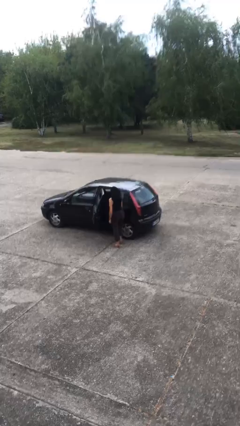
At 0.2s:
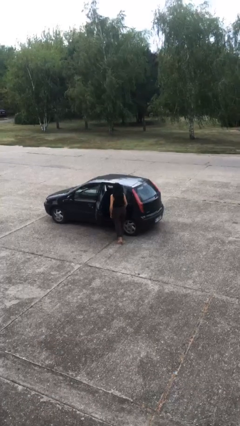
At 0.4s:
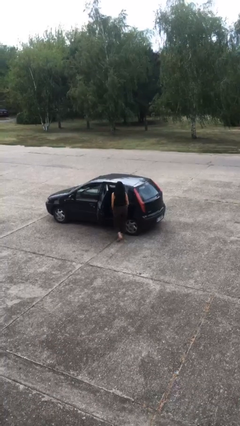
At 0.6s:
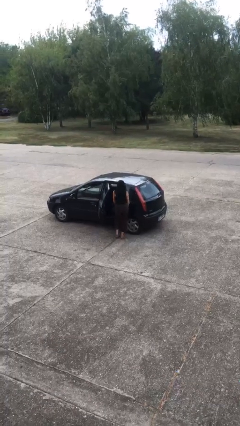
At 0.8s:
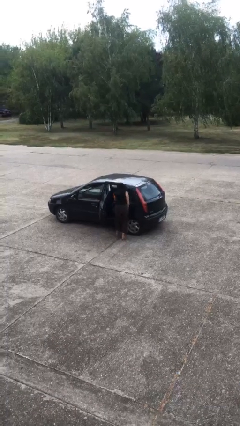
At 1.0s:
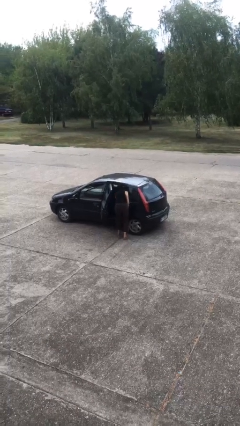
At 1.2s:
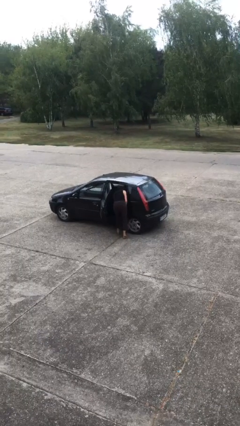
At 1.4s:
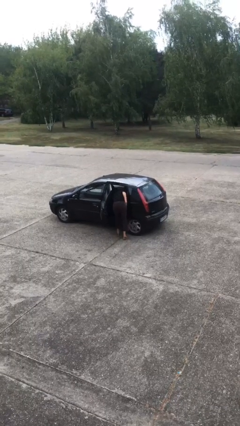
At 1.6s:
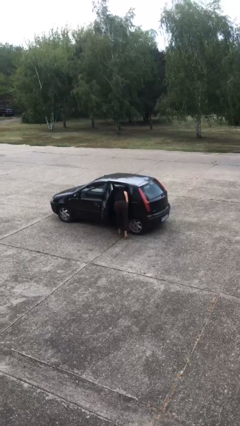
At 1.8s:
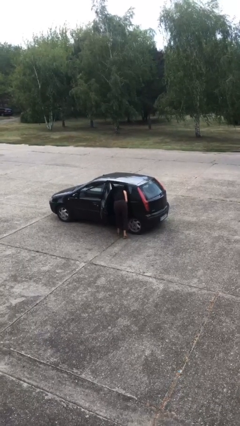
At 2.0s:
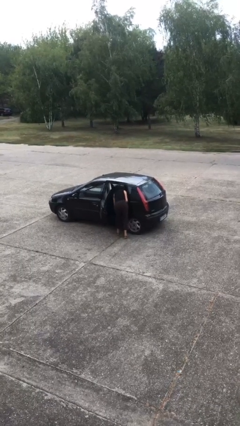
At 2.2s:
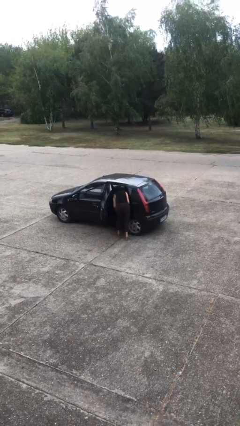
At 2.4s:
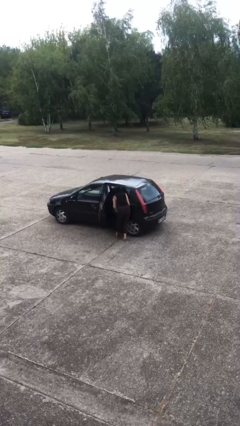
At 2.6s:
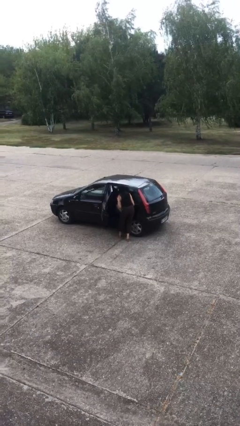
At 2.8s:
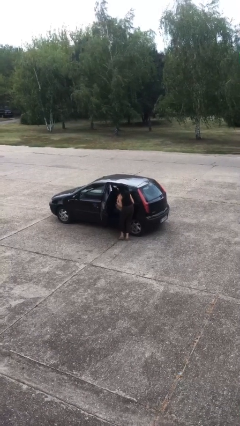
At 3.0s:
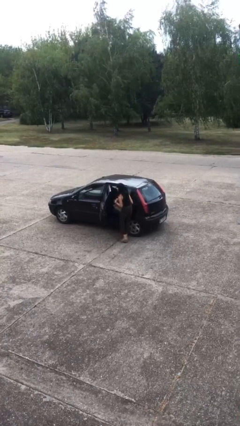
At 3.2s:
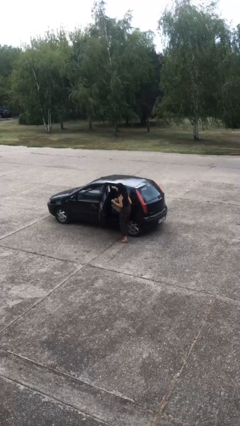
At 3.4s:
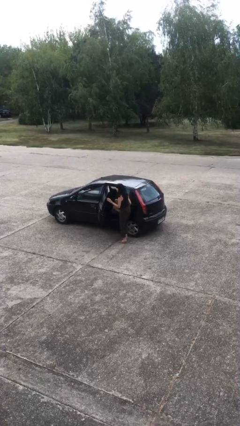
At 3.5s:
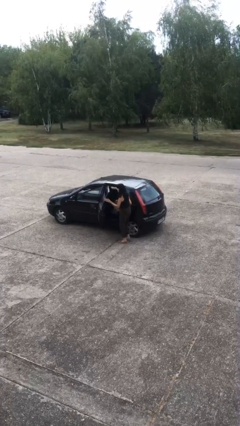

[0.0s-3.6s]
person unloads car

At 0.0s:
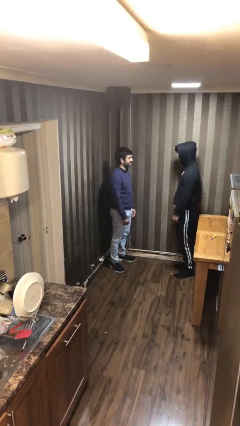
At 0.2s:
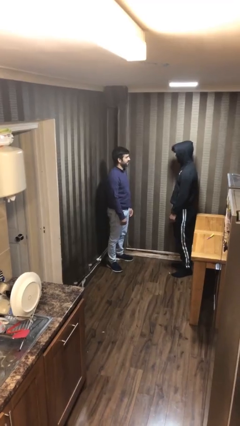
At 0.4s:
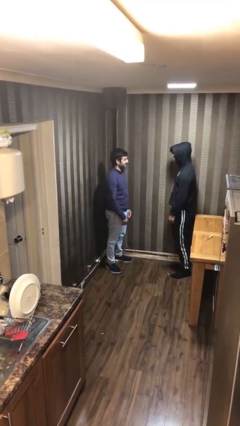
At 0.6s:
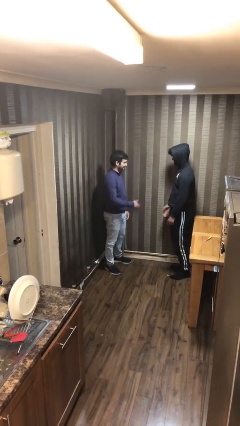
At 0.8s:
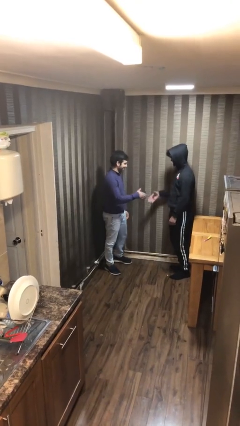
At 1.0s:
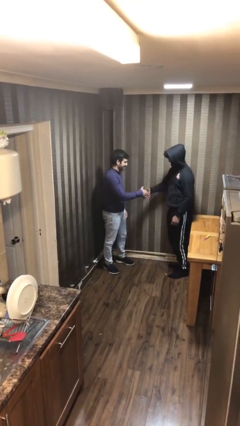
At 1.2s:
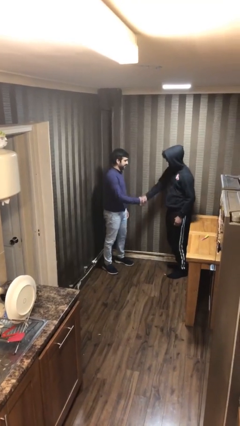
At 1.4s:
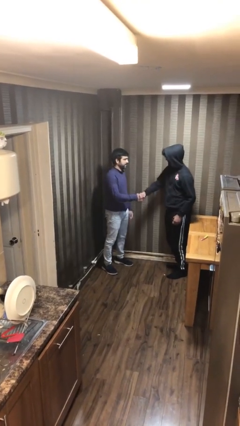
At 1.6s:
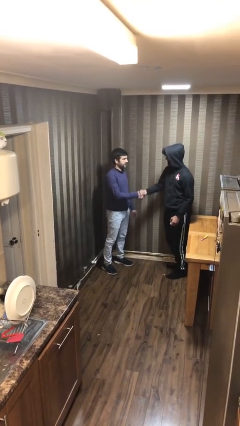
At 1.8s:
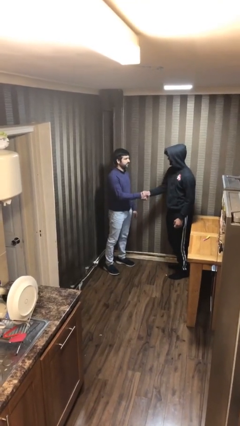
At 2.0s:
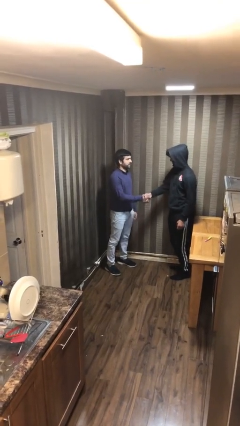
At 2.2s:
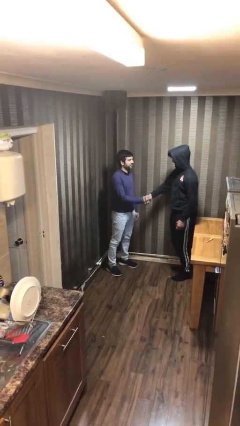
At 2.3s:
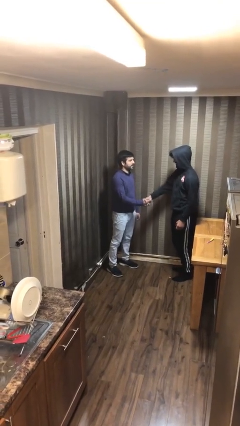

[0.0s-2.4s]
person shakes hand

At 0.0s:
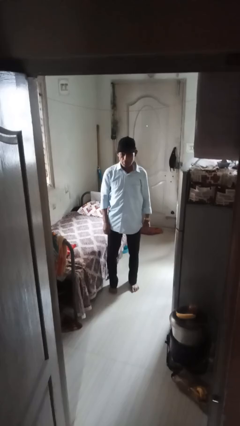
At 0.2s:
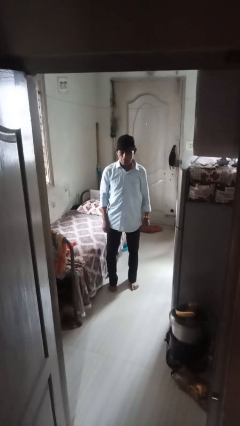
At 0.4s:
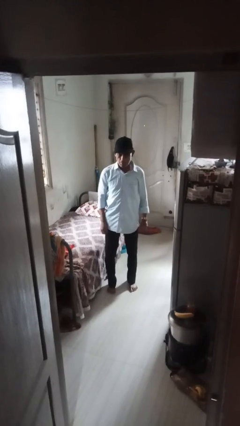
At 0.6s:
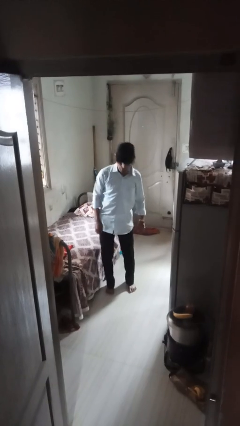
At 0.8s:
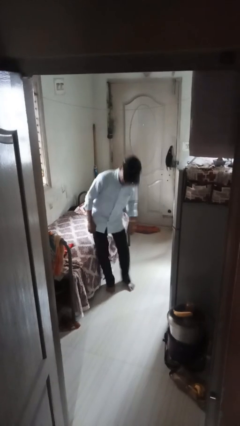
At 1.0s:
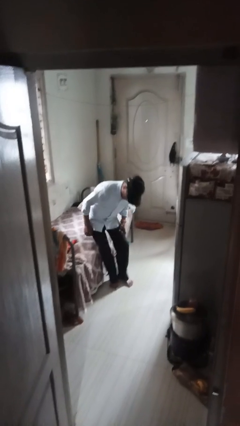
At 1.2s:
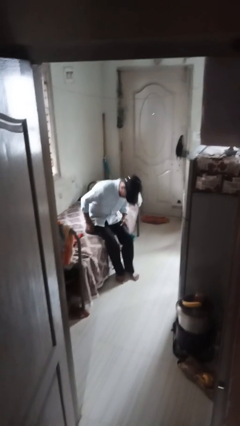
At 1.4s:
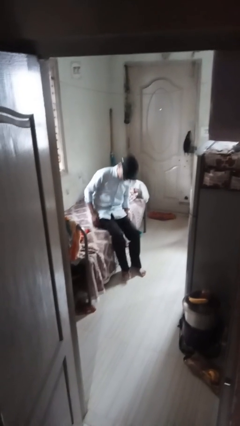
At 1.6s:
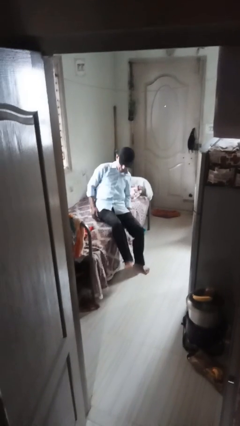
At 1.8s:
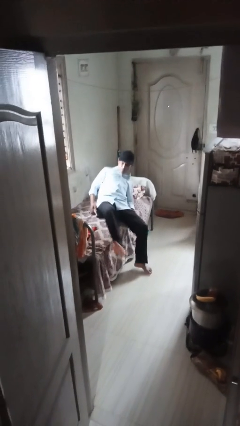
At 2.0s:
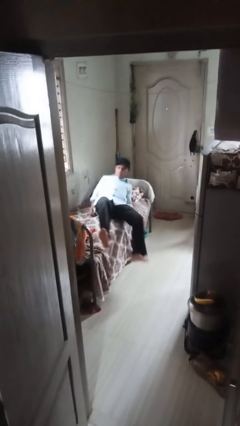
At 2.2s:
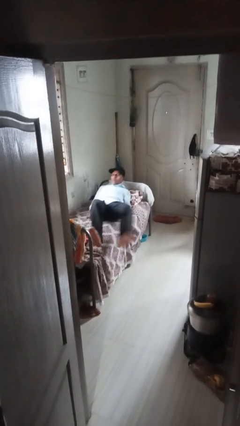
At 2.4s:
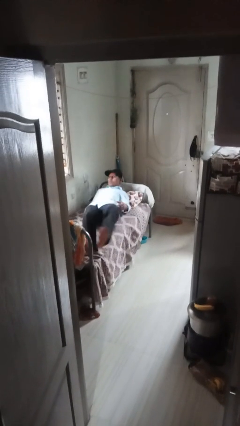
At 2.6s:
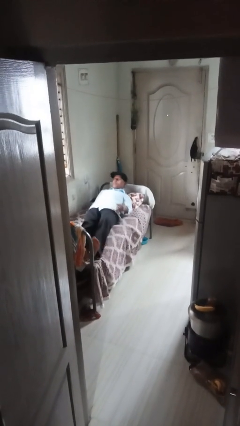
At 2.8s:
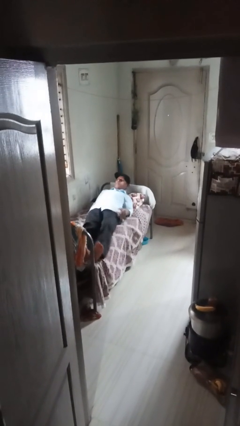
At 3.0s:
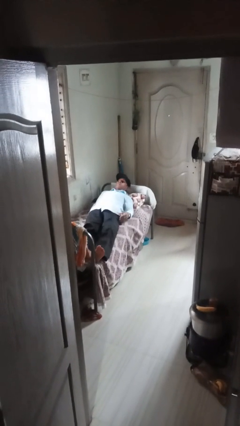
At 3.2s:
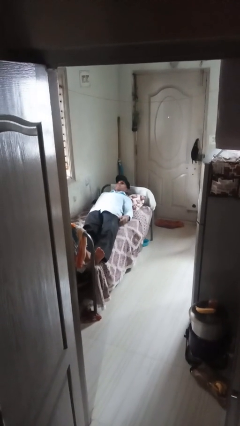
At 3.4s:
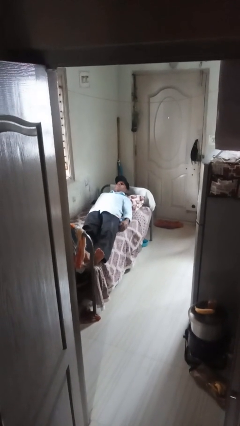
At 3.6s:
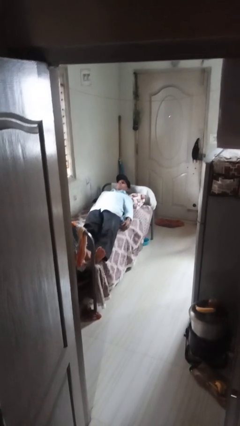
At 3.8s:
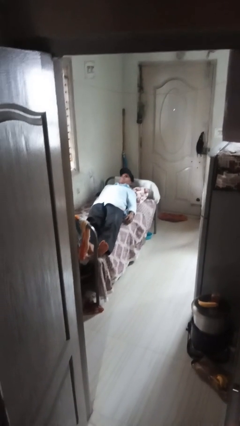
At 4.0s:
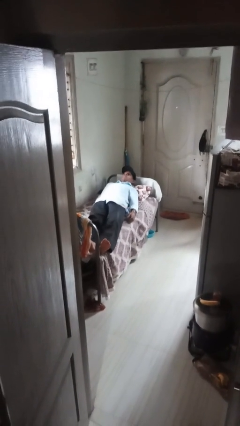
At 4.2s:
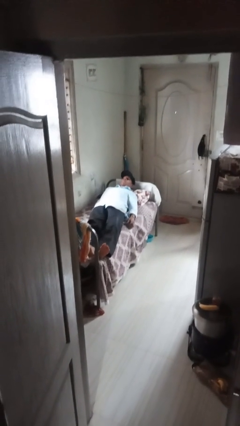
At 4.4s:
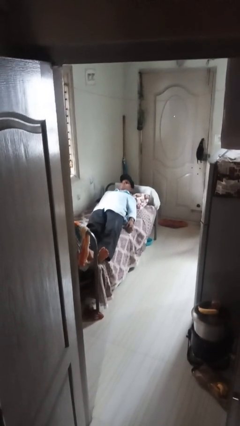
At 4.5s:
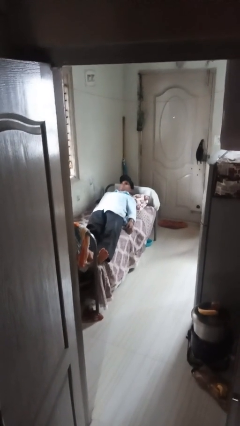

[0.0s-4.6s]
person lies down on bed

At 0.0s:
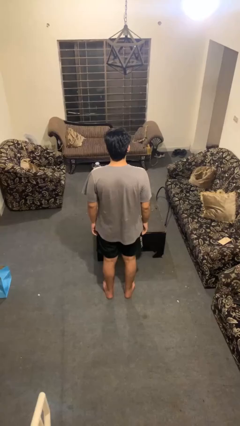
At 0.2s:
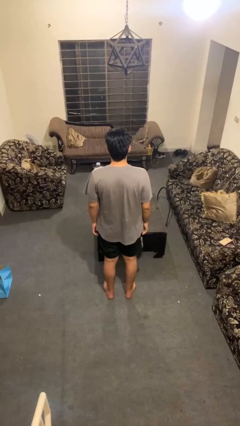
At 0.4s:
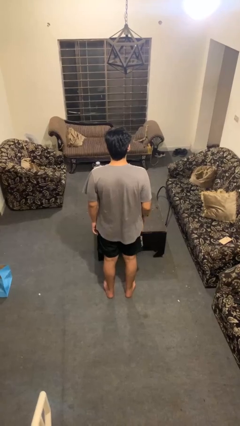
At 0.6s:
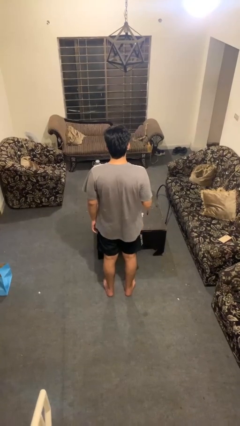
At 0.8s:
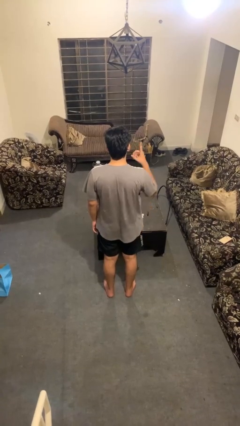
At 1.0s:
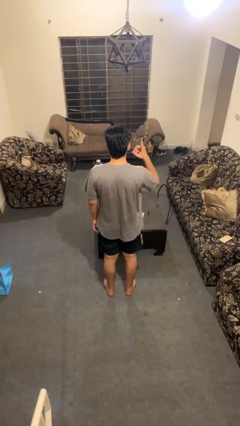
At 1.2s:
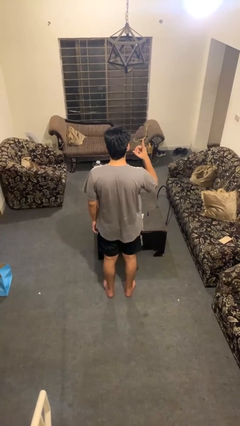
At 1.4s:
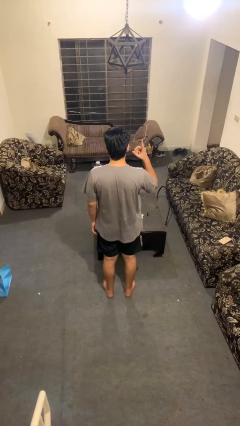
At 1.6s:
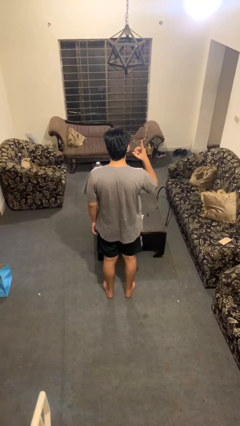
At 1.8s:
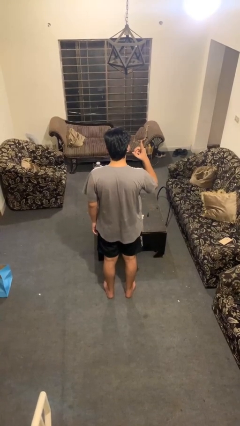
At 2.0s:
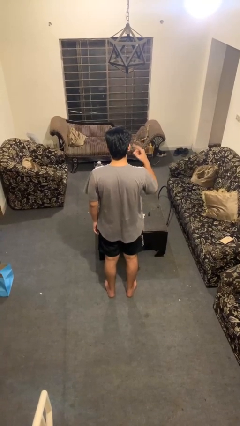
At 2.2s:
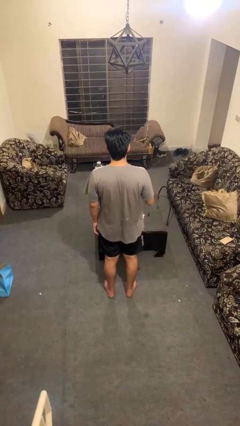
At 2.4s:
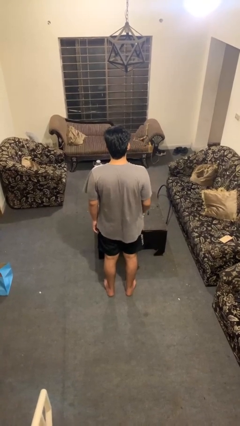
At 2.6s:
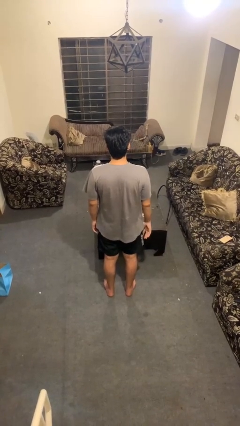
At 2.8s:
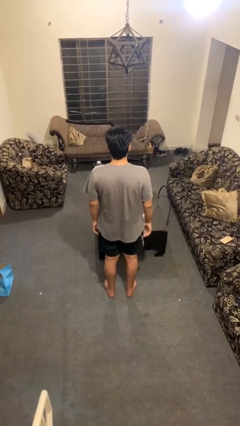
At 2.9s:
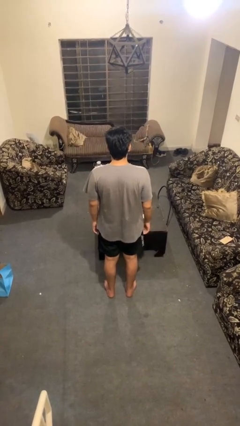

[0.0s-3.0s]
person gestures number one

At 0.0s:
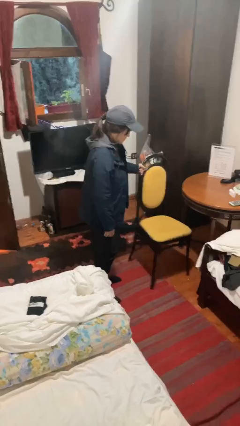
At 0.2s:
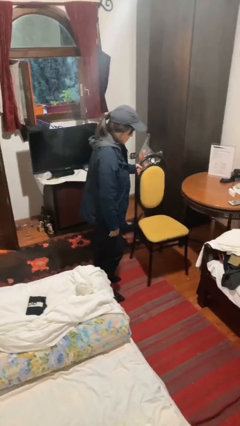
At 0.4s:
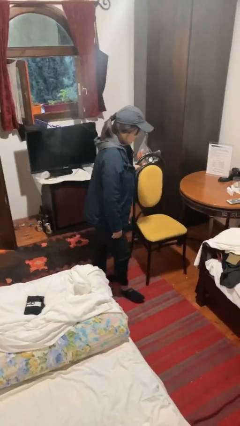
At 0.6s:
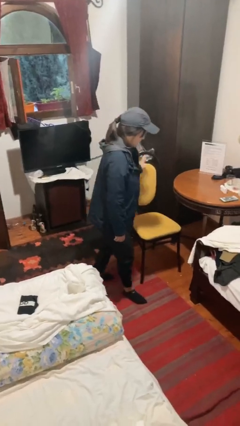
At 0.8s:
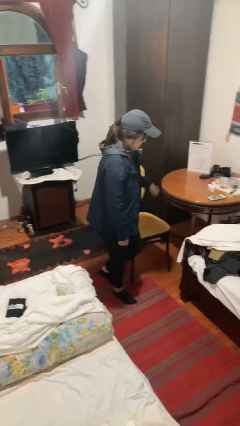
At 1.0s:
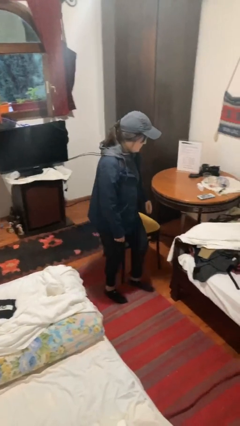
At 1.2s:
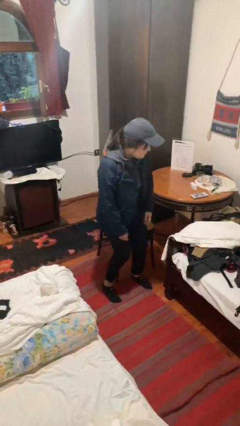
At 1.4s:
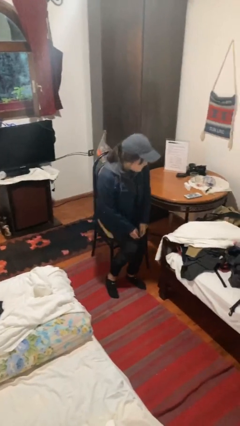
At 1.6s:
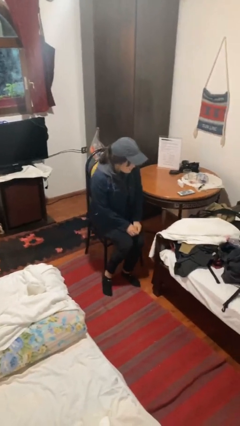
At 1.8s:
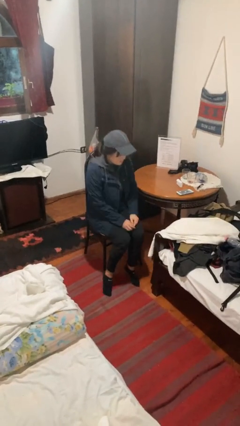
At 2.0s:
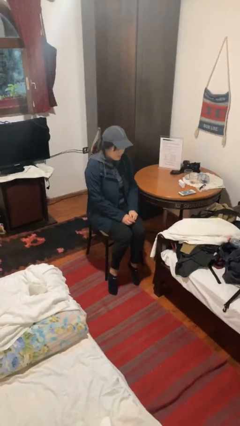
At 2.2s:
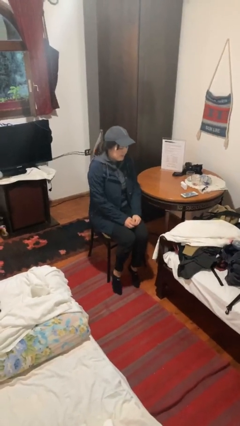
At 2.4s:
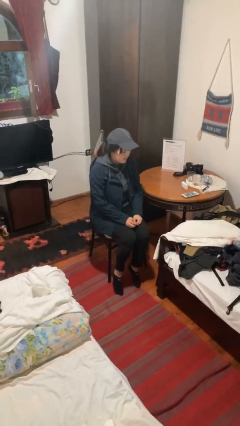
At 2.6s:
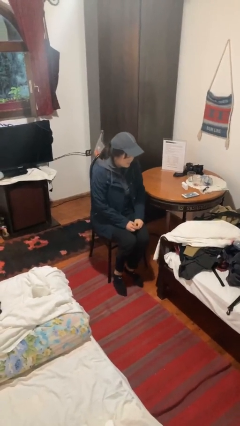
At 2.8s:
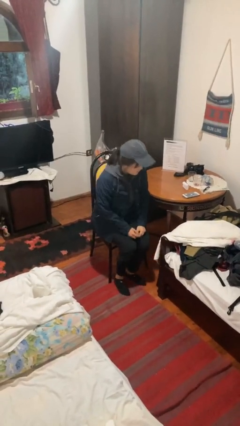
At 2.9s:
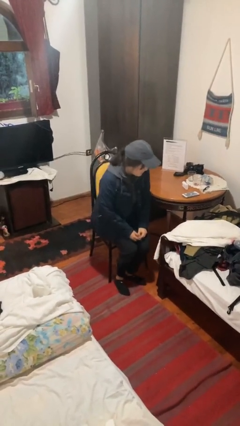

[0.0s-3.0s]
person sits down

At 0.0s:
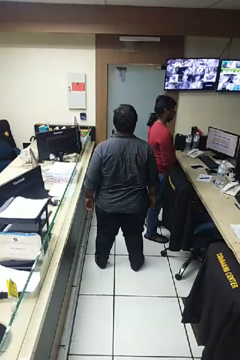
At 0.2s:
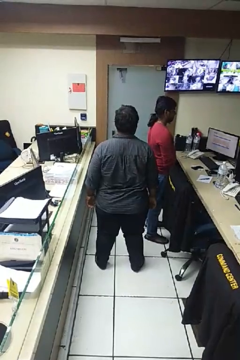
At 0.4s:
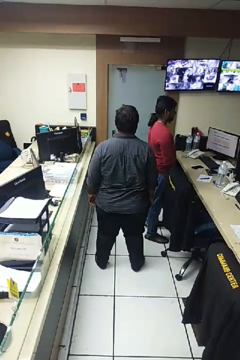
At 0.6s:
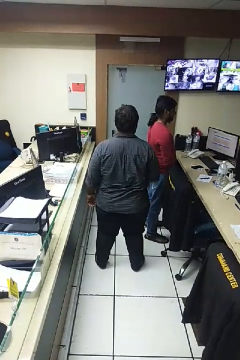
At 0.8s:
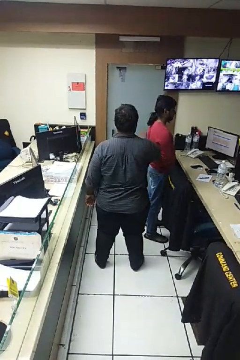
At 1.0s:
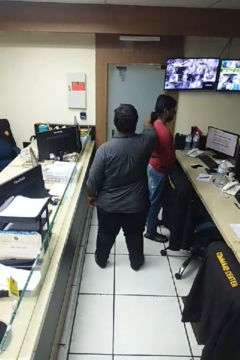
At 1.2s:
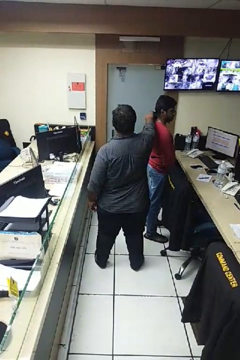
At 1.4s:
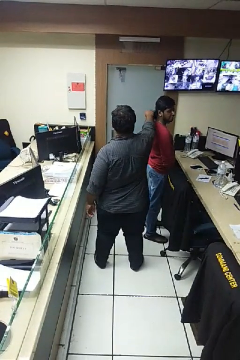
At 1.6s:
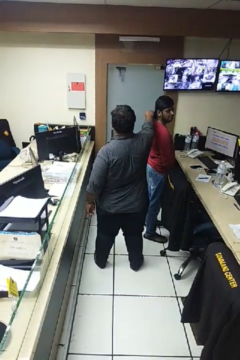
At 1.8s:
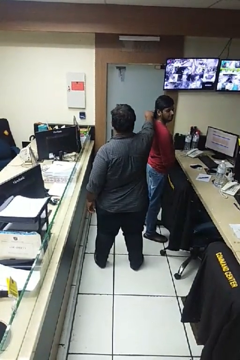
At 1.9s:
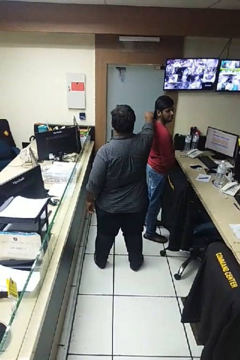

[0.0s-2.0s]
person grabs person by hair
